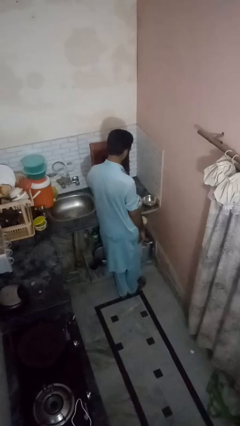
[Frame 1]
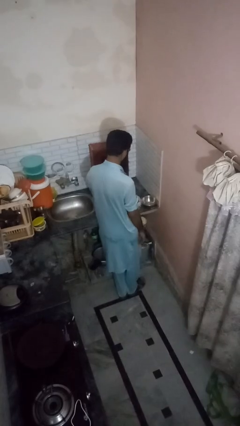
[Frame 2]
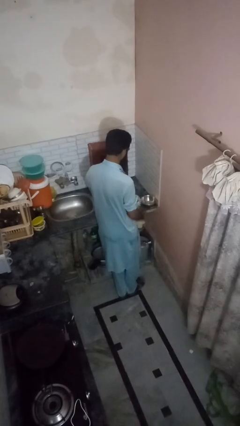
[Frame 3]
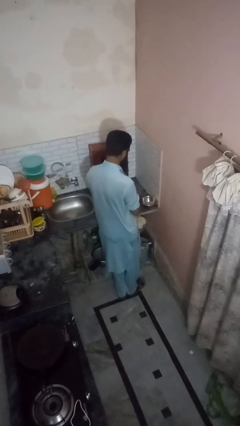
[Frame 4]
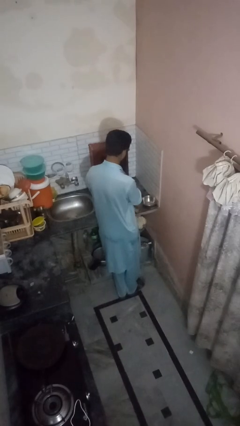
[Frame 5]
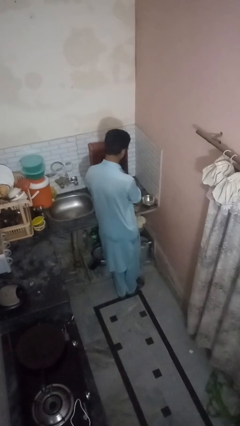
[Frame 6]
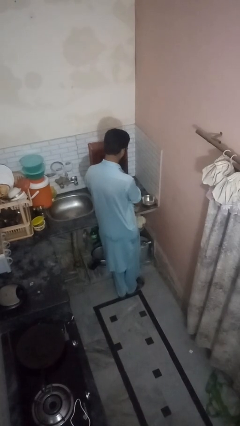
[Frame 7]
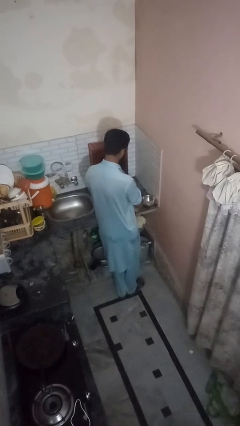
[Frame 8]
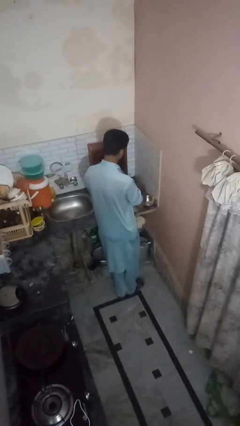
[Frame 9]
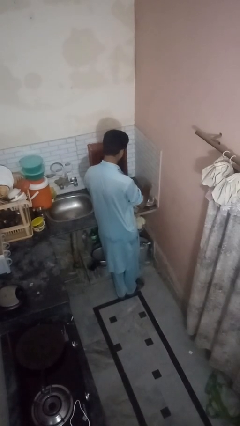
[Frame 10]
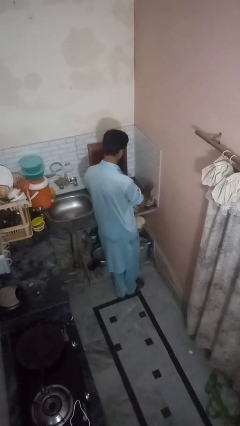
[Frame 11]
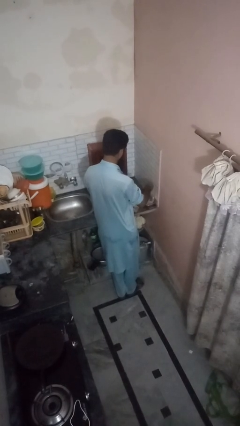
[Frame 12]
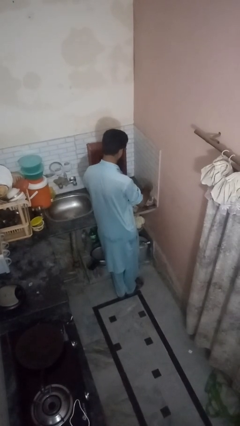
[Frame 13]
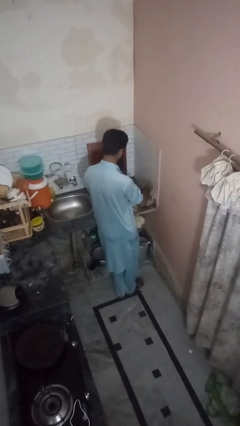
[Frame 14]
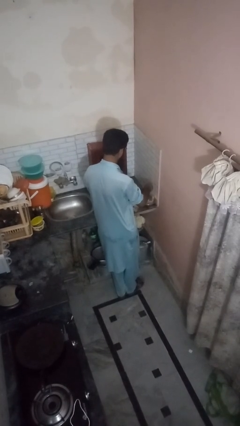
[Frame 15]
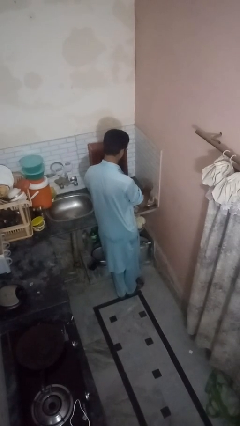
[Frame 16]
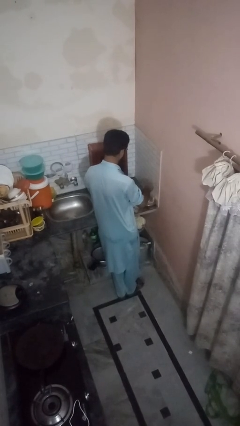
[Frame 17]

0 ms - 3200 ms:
person pours into bowl

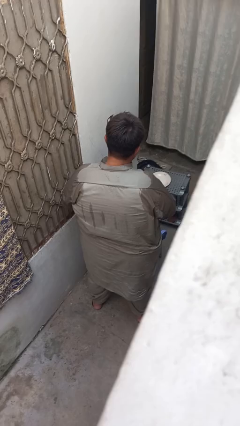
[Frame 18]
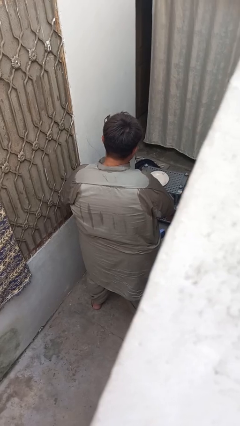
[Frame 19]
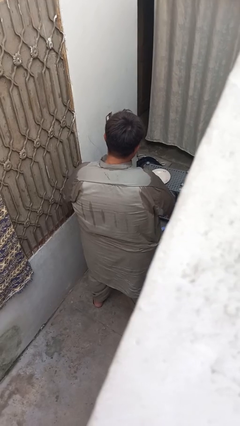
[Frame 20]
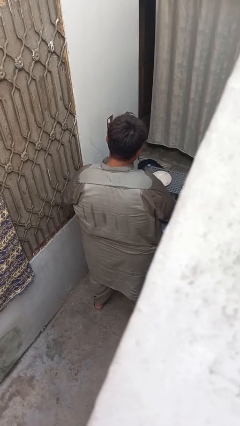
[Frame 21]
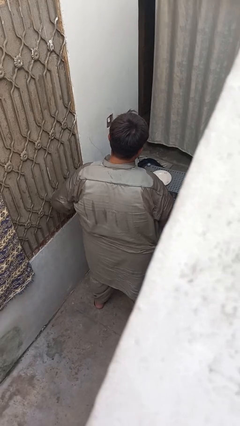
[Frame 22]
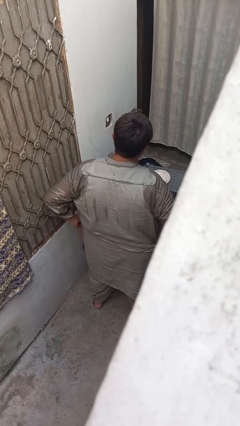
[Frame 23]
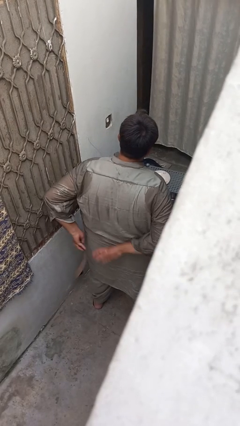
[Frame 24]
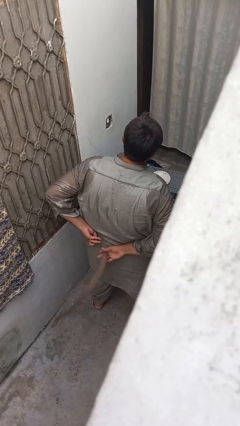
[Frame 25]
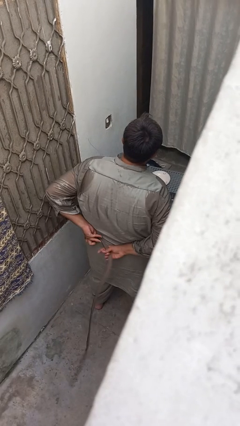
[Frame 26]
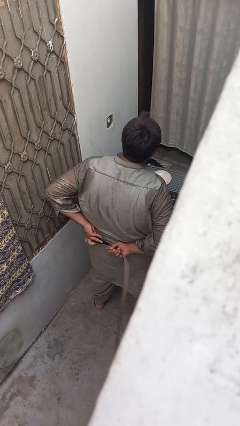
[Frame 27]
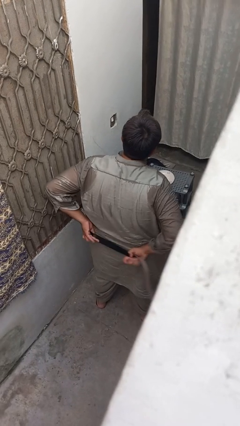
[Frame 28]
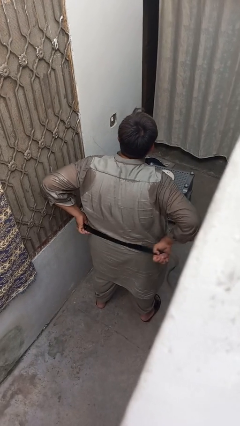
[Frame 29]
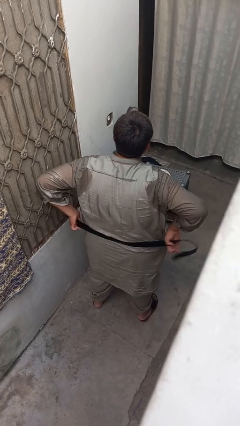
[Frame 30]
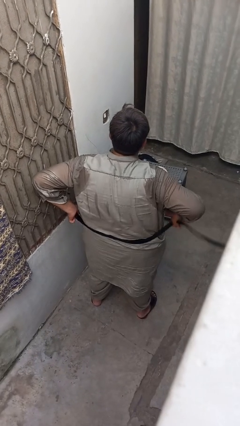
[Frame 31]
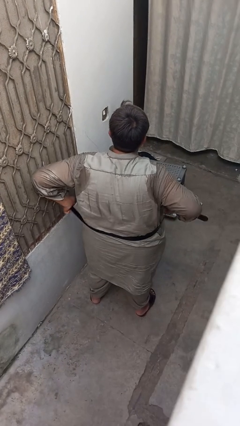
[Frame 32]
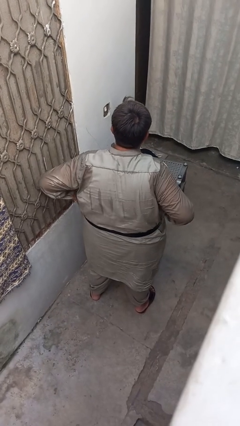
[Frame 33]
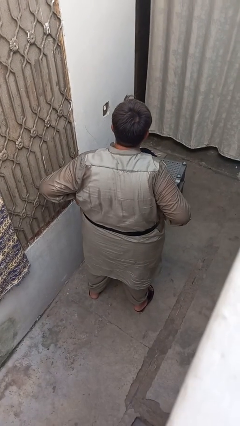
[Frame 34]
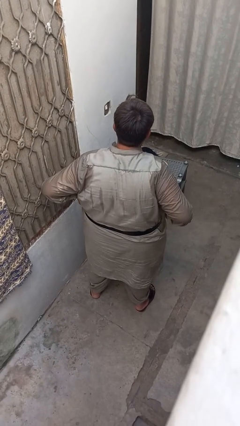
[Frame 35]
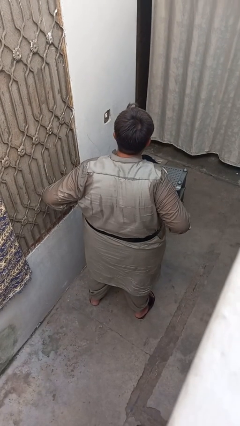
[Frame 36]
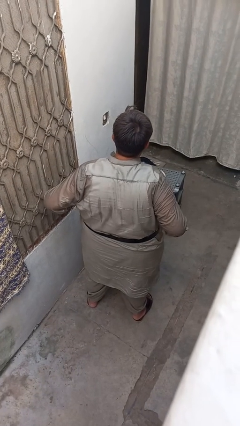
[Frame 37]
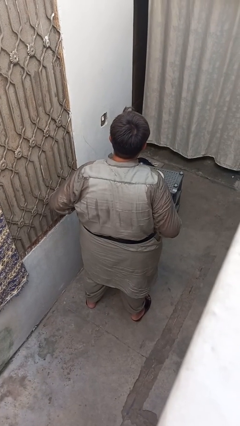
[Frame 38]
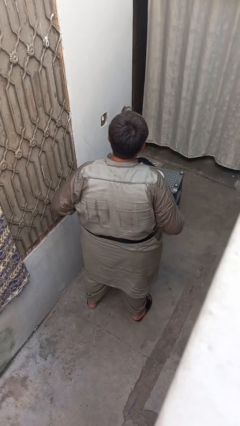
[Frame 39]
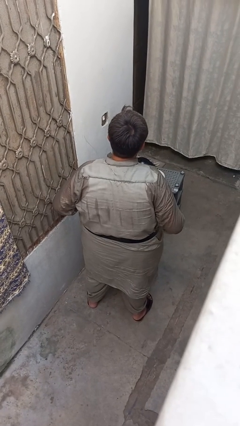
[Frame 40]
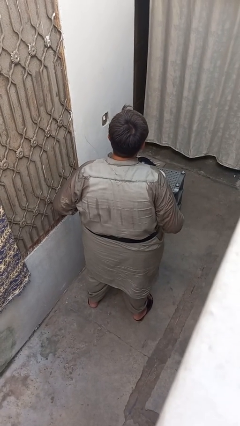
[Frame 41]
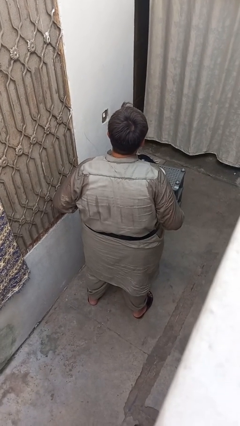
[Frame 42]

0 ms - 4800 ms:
person puts on belt

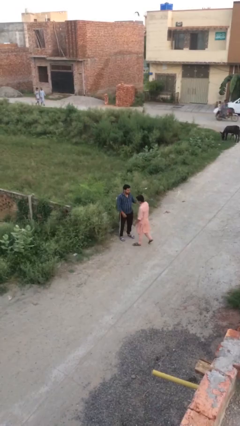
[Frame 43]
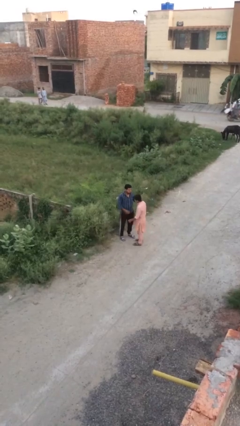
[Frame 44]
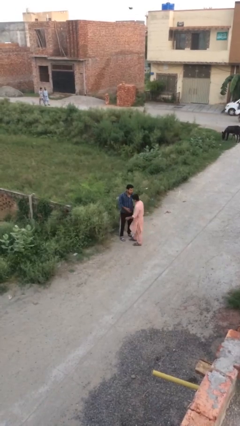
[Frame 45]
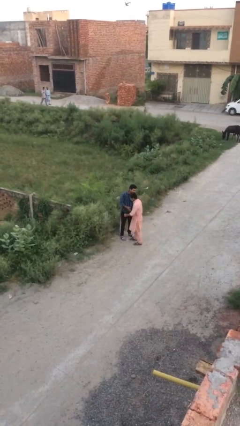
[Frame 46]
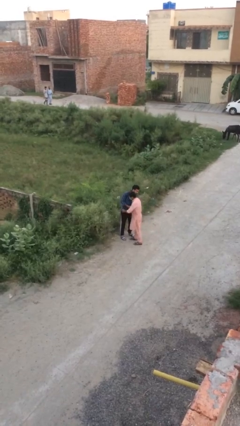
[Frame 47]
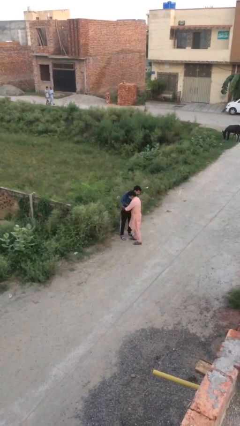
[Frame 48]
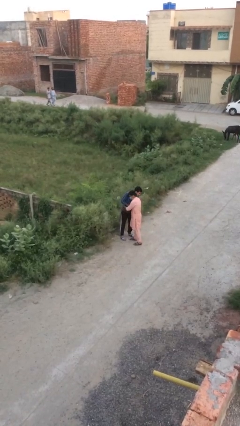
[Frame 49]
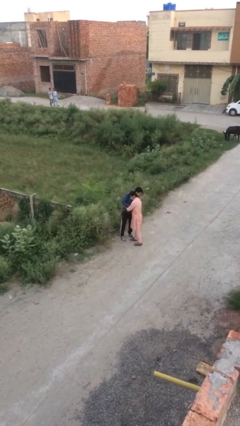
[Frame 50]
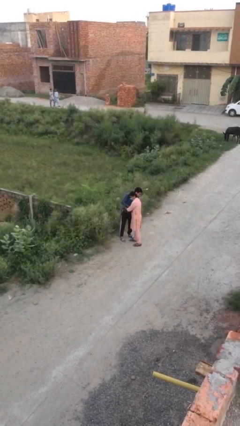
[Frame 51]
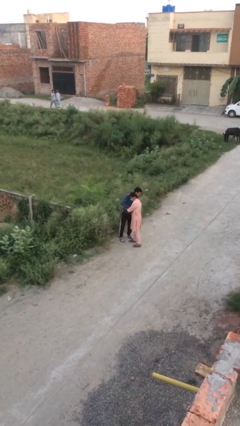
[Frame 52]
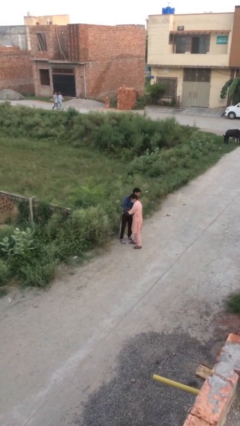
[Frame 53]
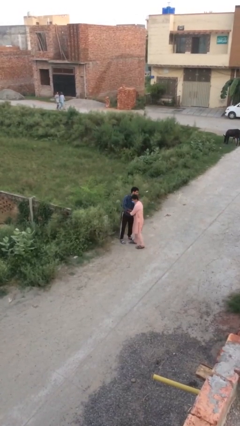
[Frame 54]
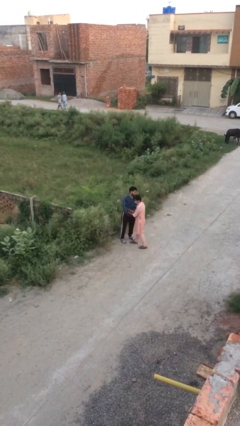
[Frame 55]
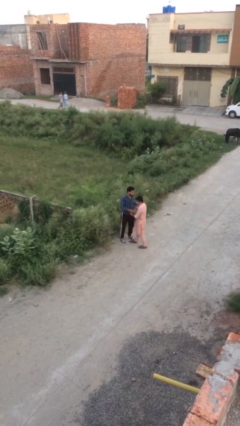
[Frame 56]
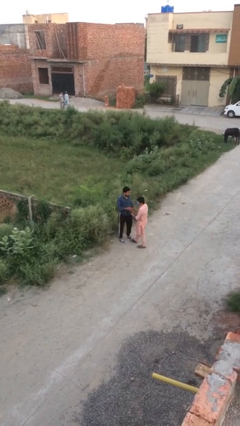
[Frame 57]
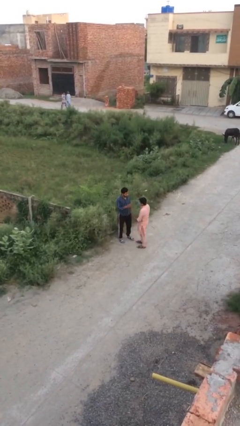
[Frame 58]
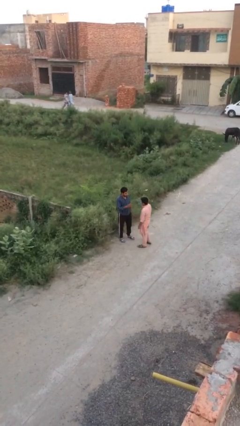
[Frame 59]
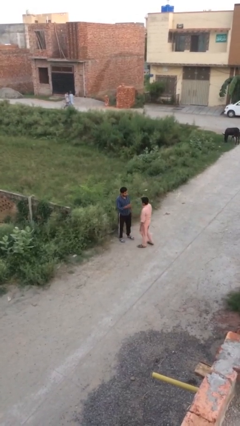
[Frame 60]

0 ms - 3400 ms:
person embraces person

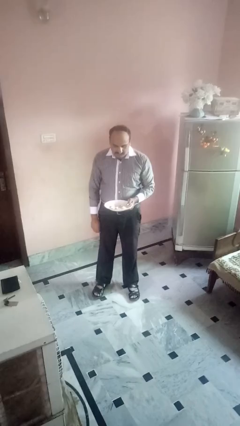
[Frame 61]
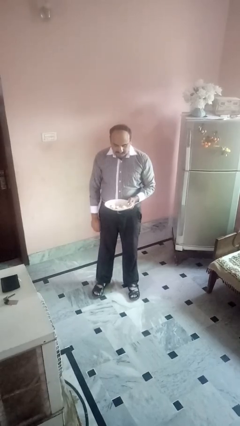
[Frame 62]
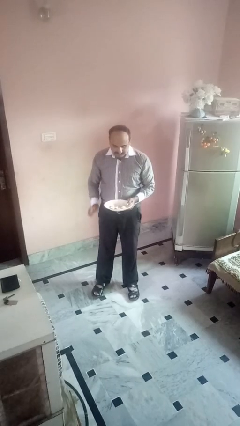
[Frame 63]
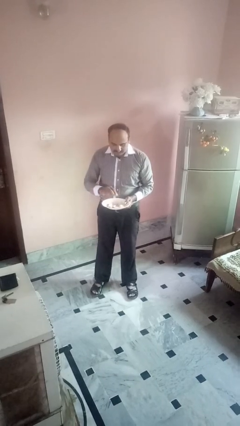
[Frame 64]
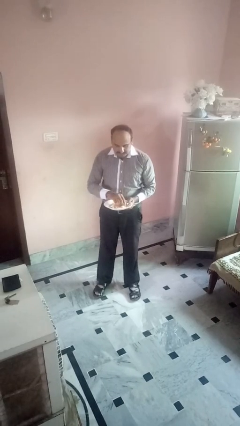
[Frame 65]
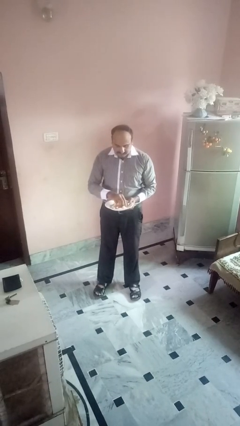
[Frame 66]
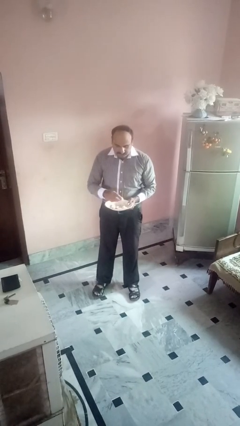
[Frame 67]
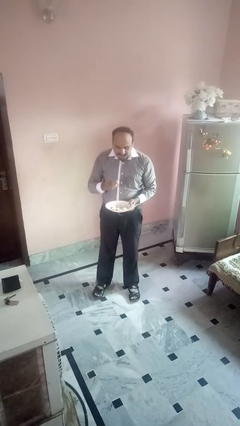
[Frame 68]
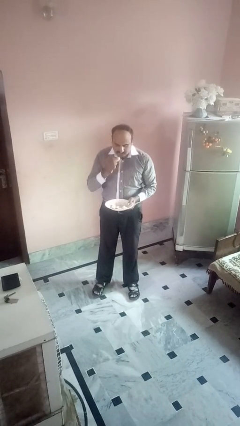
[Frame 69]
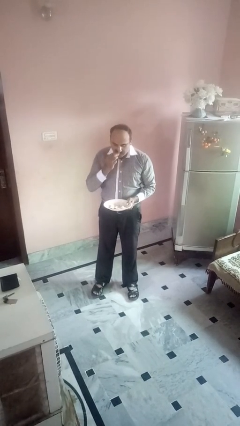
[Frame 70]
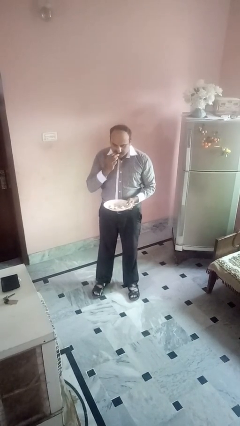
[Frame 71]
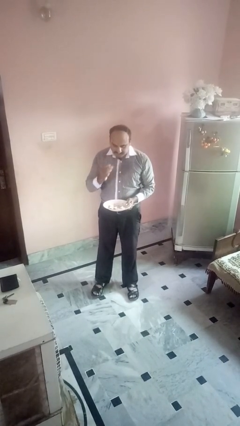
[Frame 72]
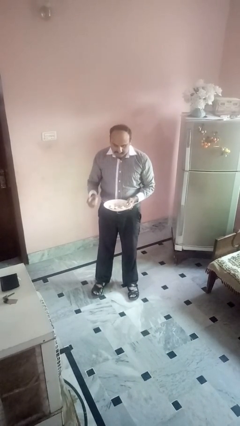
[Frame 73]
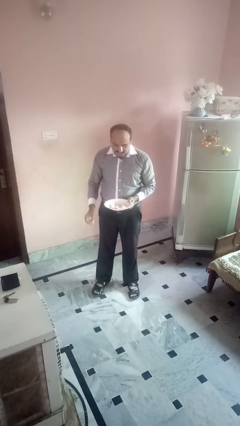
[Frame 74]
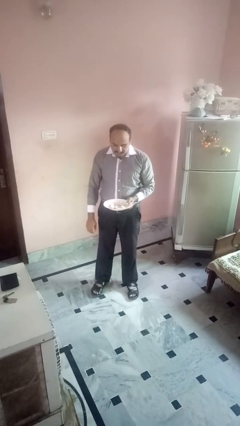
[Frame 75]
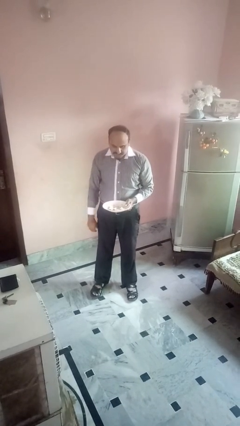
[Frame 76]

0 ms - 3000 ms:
person eats with hands

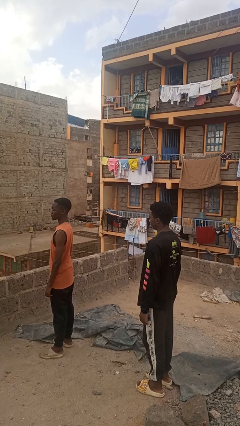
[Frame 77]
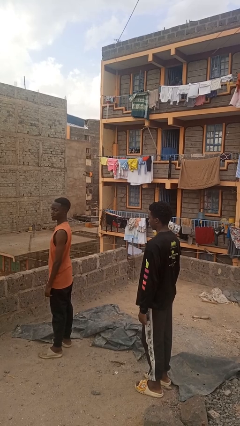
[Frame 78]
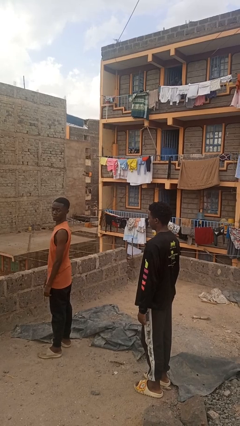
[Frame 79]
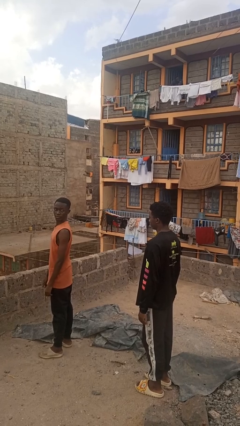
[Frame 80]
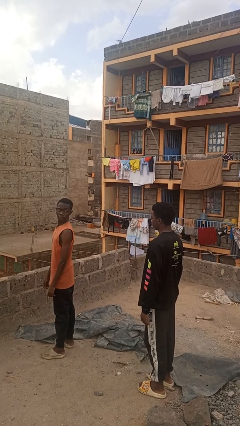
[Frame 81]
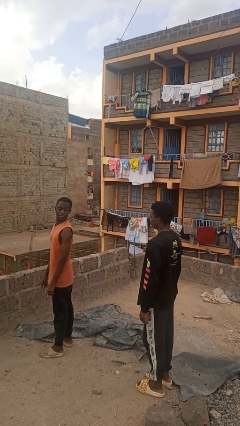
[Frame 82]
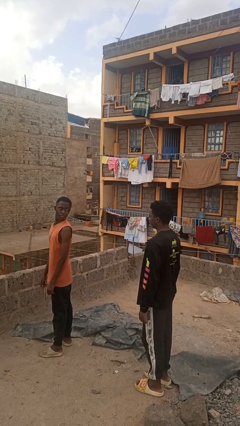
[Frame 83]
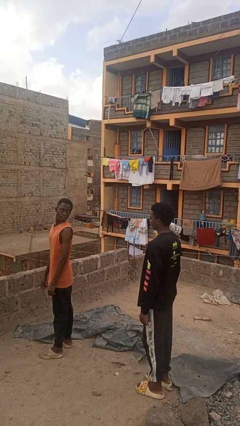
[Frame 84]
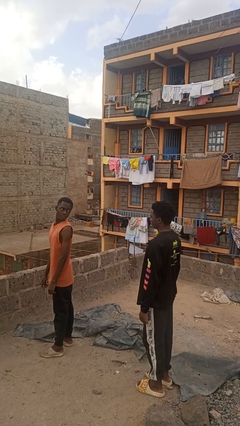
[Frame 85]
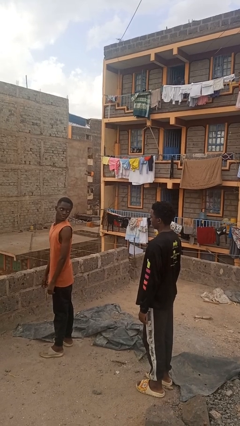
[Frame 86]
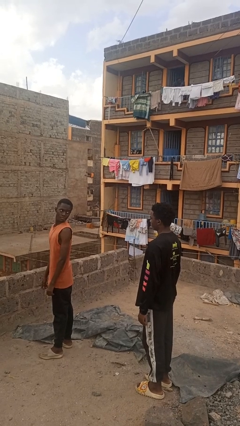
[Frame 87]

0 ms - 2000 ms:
person looks over shoulder

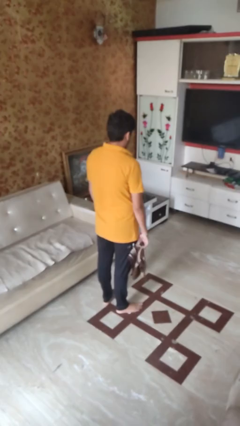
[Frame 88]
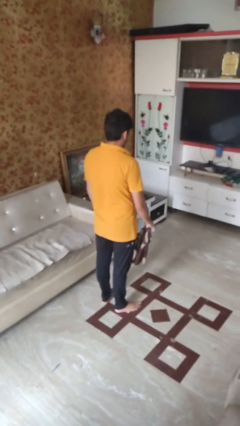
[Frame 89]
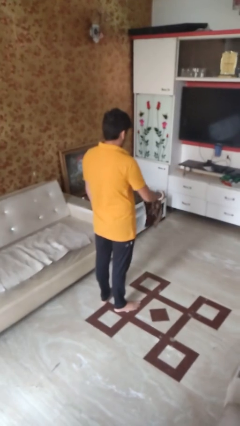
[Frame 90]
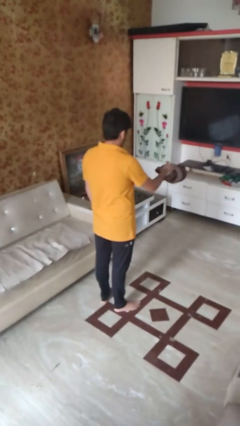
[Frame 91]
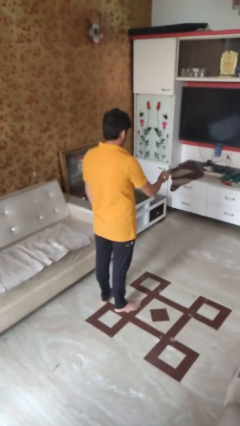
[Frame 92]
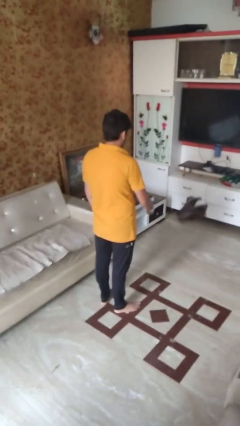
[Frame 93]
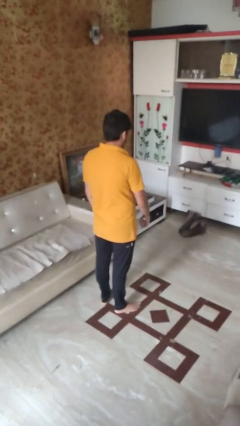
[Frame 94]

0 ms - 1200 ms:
person throws object to ground
